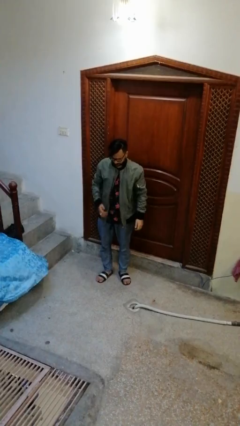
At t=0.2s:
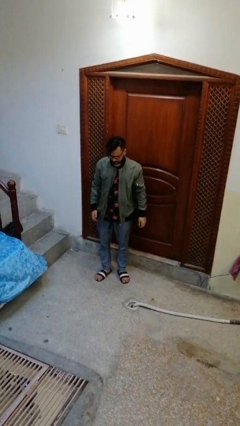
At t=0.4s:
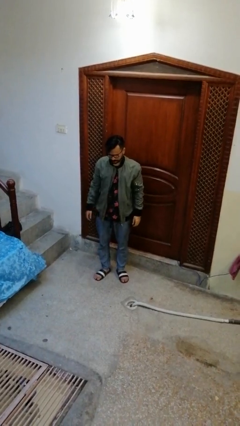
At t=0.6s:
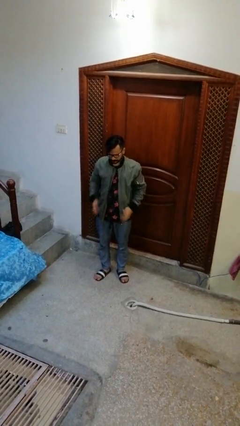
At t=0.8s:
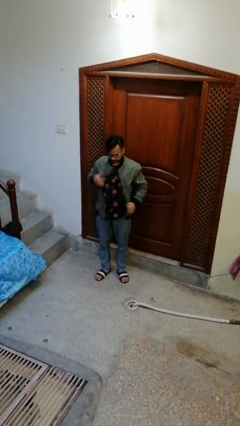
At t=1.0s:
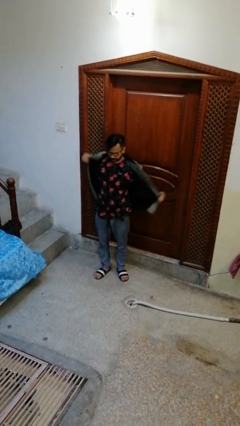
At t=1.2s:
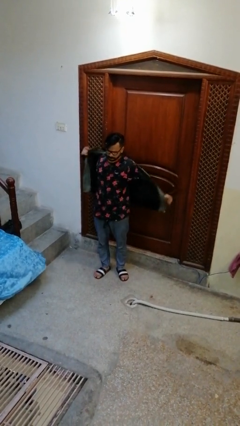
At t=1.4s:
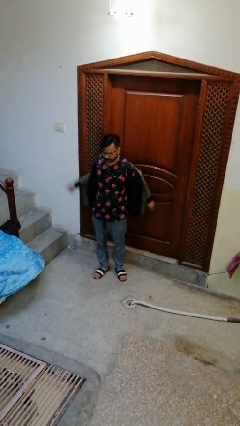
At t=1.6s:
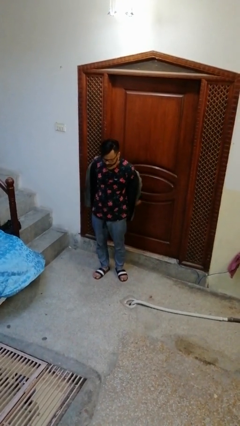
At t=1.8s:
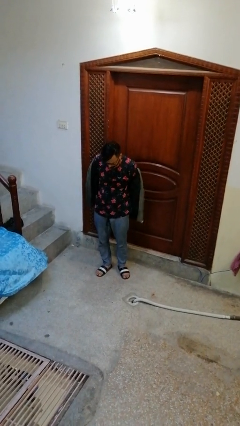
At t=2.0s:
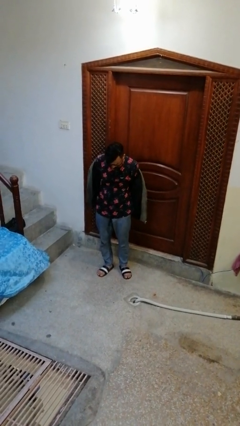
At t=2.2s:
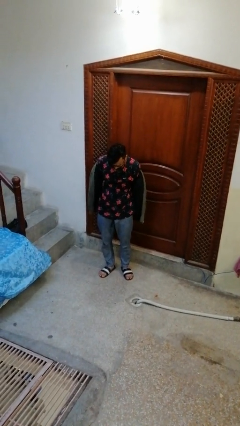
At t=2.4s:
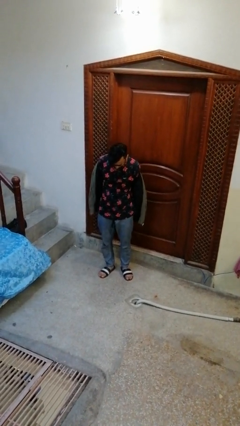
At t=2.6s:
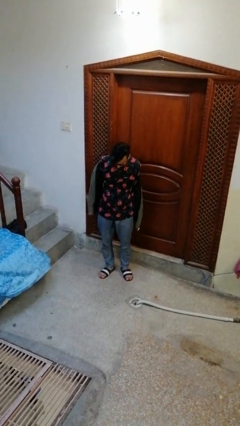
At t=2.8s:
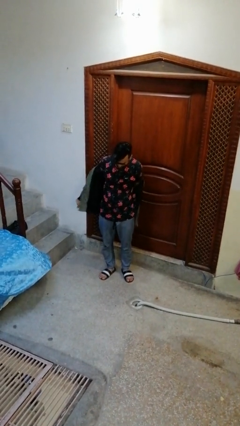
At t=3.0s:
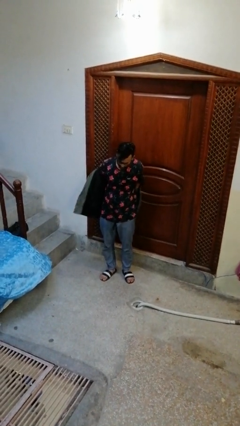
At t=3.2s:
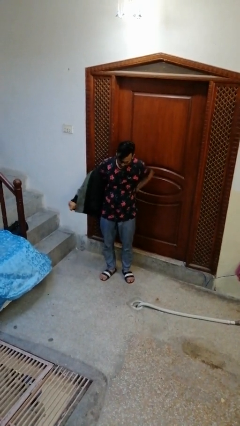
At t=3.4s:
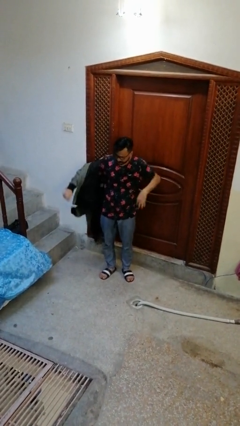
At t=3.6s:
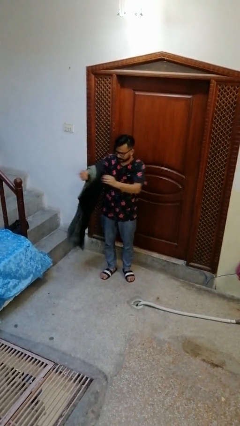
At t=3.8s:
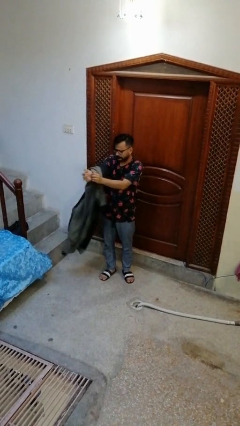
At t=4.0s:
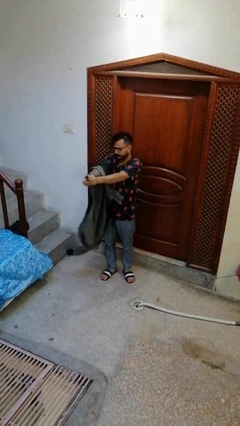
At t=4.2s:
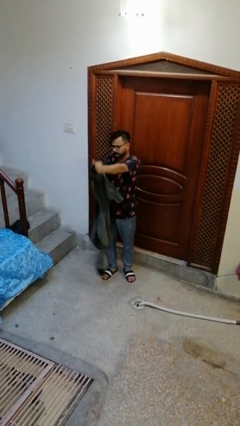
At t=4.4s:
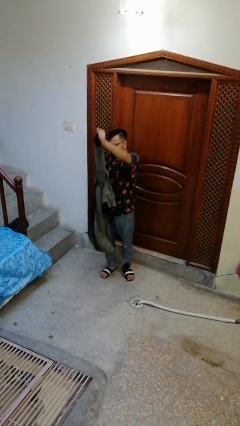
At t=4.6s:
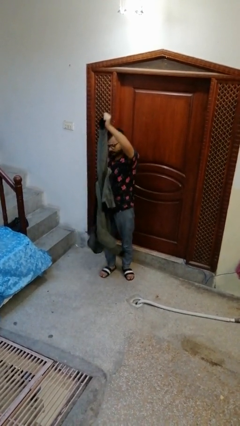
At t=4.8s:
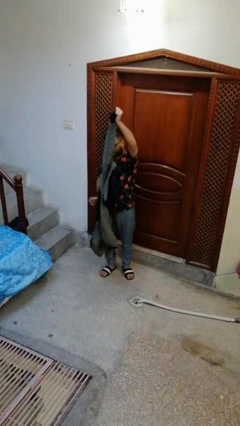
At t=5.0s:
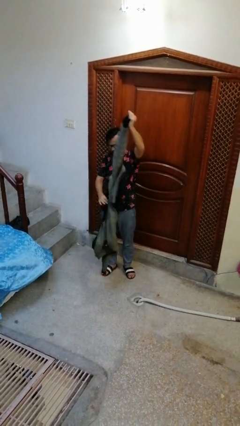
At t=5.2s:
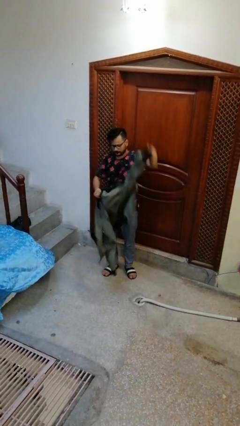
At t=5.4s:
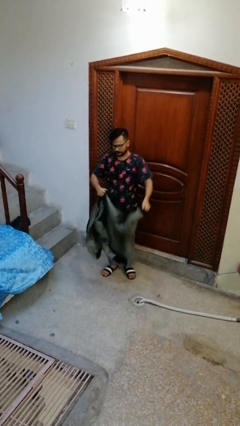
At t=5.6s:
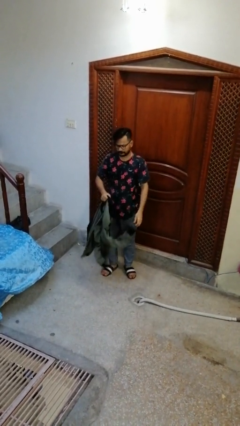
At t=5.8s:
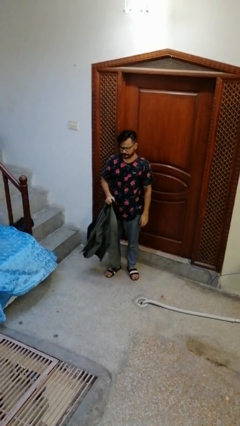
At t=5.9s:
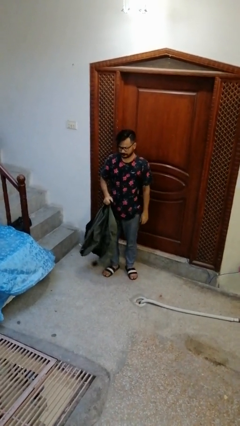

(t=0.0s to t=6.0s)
person takes off jacket

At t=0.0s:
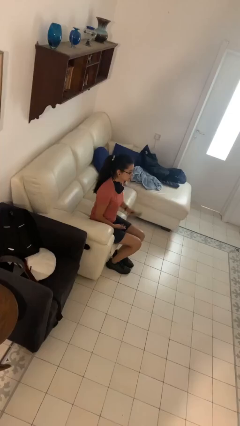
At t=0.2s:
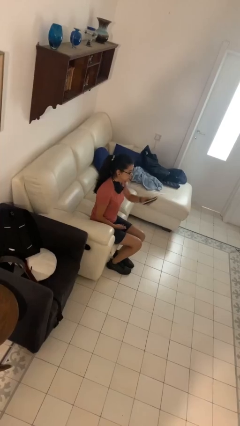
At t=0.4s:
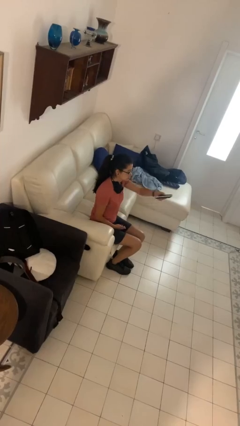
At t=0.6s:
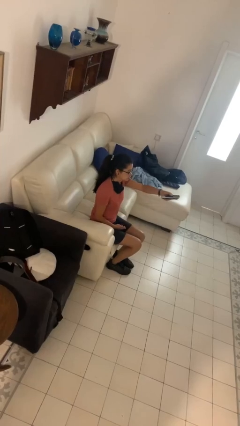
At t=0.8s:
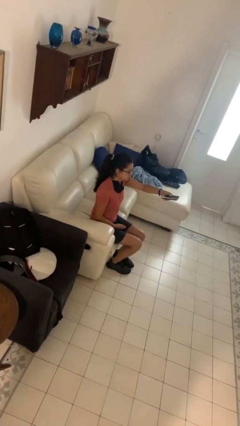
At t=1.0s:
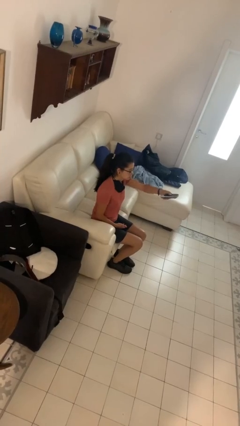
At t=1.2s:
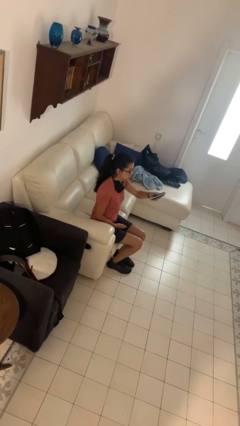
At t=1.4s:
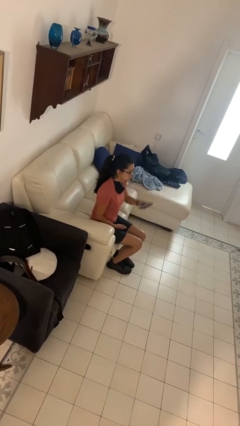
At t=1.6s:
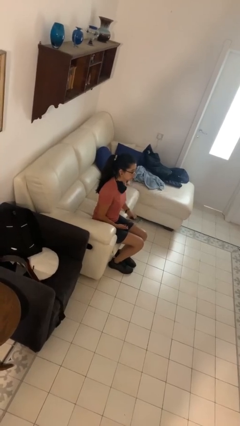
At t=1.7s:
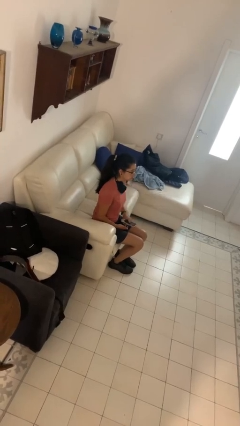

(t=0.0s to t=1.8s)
person uses television remote

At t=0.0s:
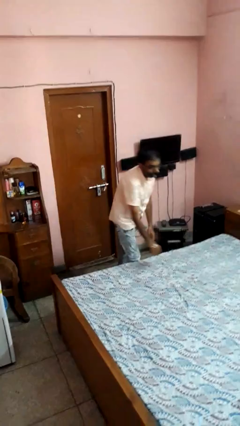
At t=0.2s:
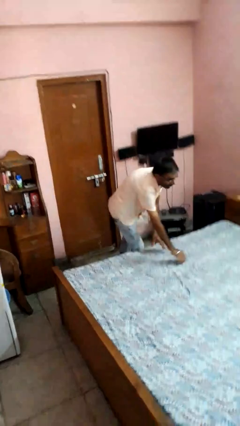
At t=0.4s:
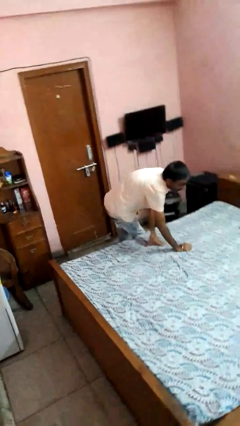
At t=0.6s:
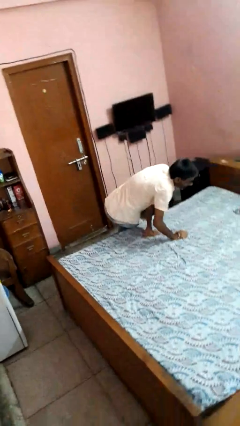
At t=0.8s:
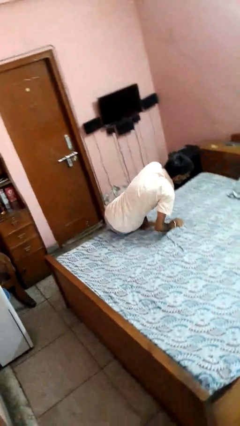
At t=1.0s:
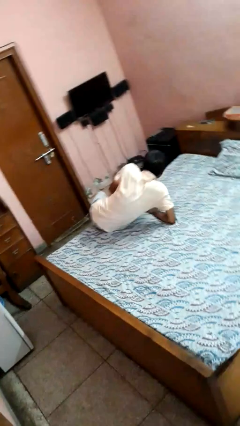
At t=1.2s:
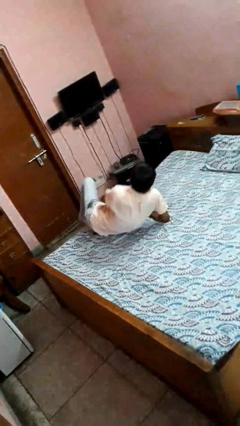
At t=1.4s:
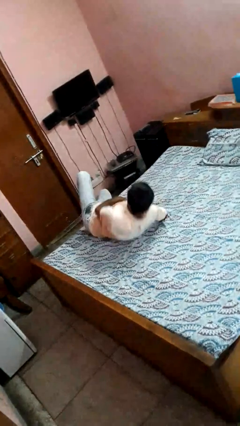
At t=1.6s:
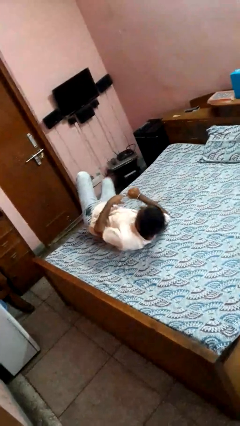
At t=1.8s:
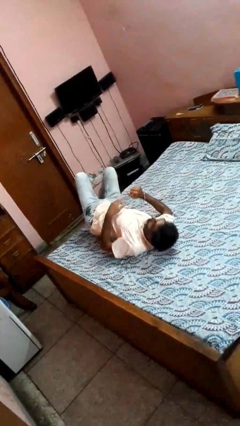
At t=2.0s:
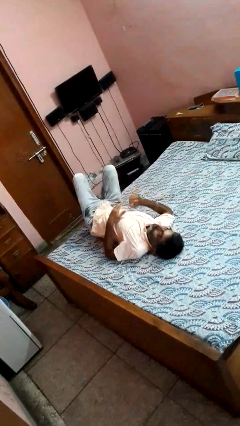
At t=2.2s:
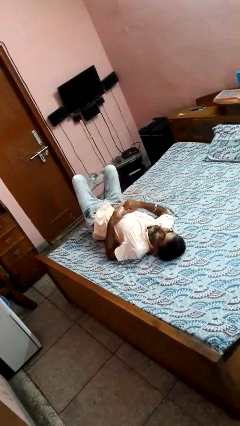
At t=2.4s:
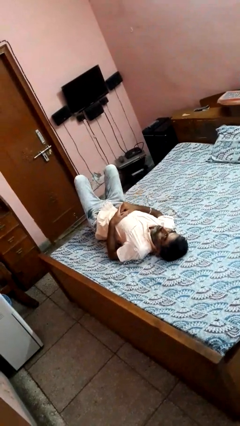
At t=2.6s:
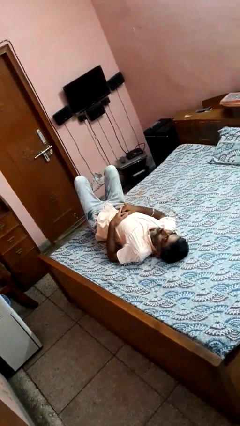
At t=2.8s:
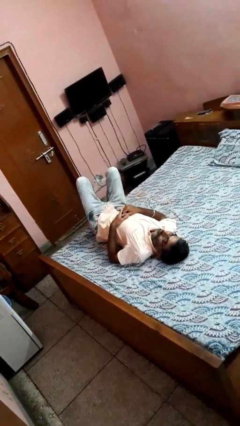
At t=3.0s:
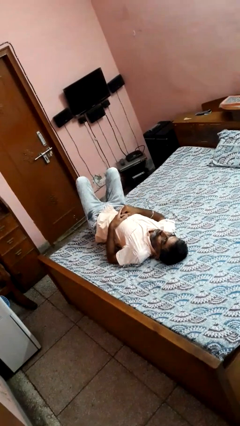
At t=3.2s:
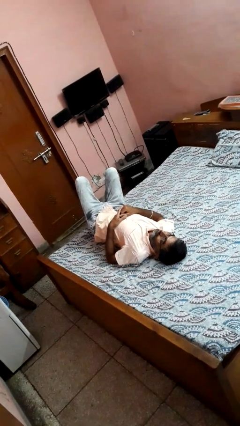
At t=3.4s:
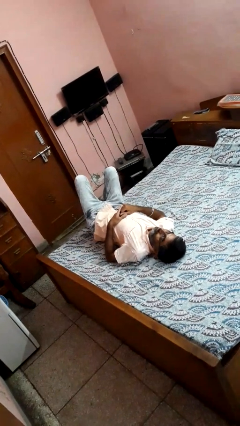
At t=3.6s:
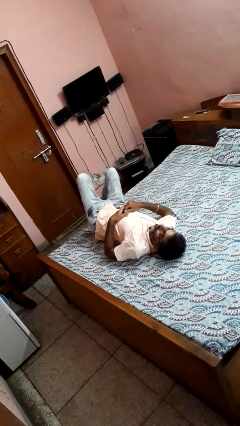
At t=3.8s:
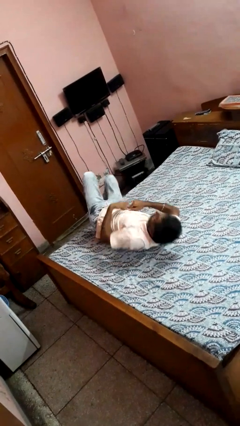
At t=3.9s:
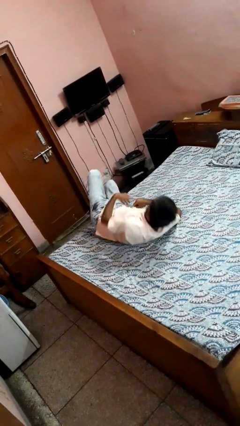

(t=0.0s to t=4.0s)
person lies down on bed

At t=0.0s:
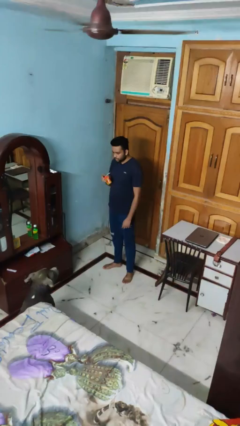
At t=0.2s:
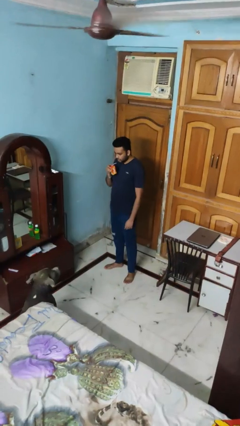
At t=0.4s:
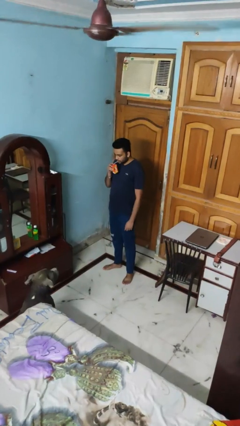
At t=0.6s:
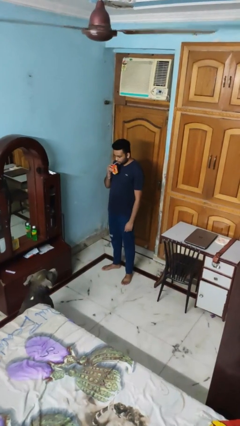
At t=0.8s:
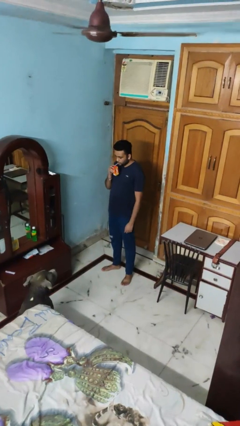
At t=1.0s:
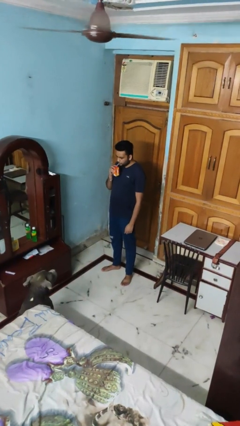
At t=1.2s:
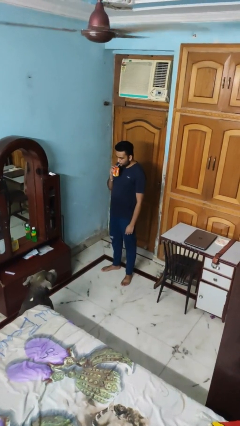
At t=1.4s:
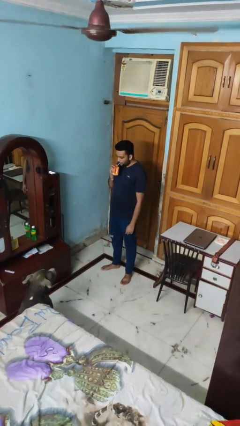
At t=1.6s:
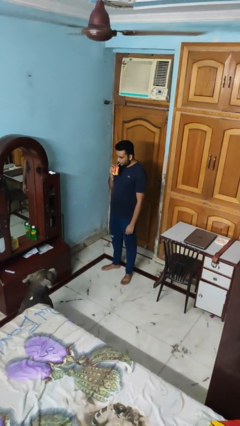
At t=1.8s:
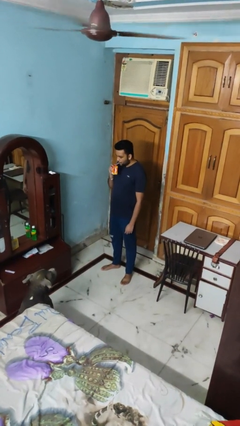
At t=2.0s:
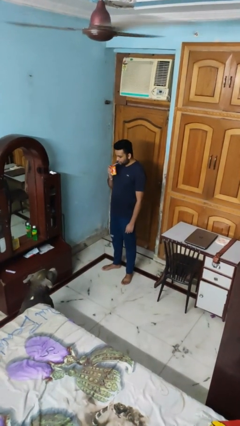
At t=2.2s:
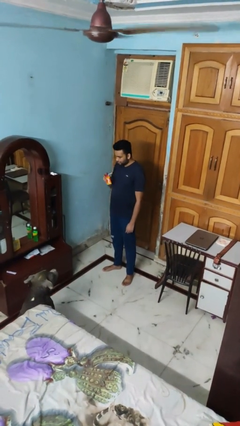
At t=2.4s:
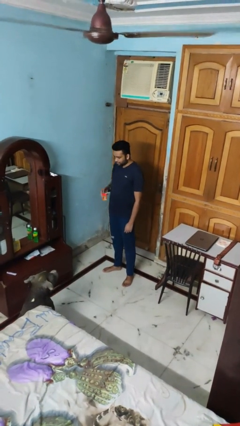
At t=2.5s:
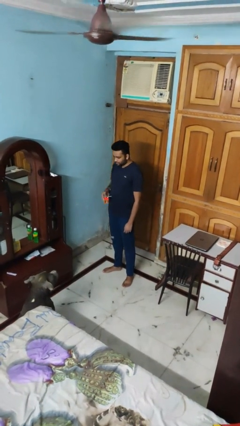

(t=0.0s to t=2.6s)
person drinks from straw

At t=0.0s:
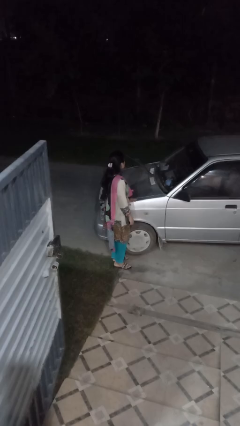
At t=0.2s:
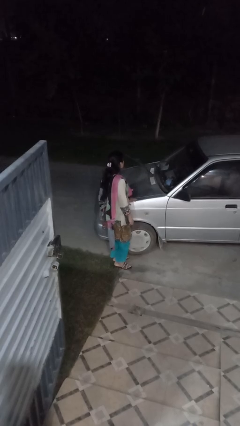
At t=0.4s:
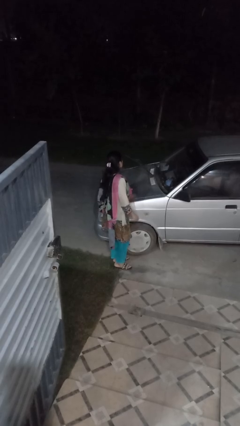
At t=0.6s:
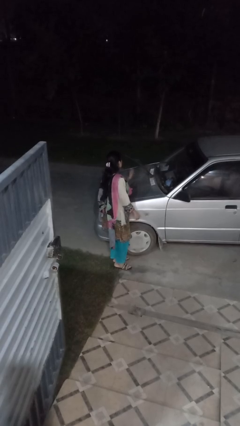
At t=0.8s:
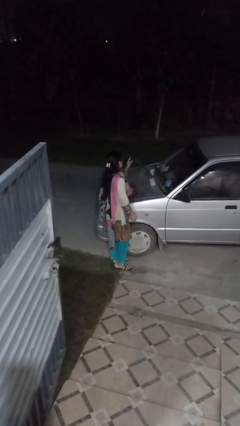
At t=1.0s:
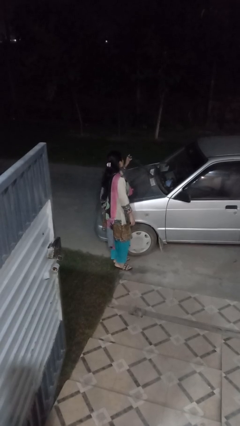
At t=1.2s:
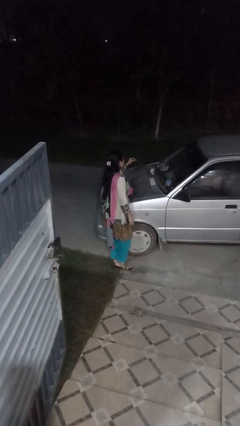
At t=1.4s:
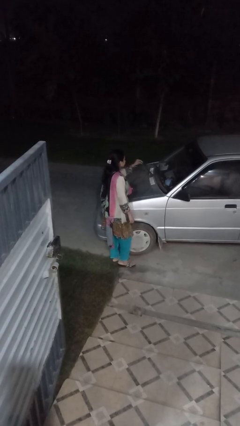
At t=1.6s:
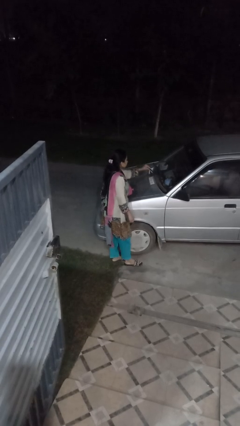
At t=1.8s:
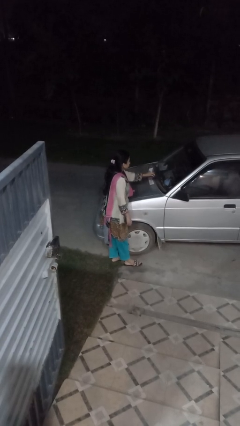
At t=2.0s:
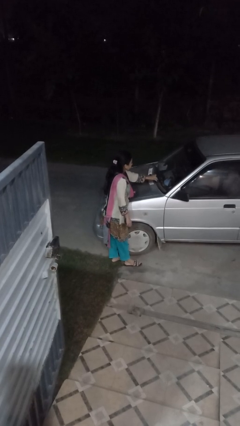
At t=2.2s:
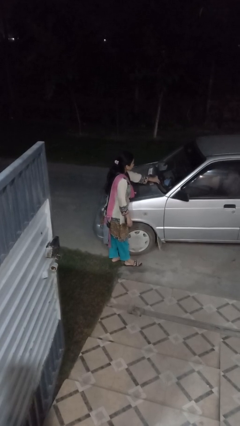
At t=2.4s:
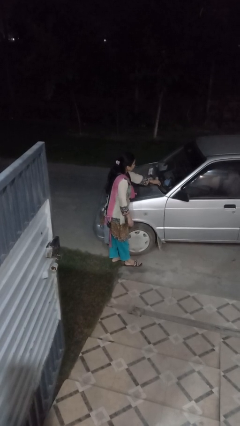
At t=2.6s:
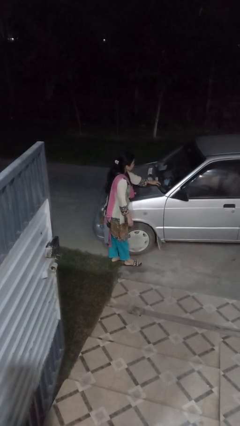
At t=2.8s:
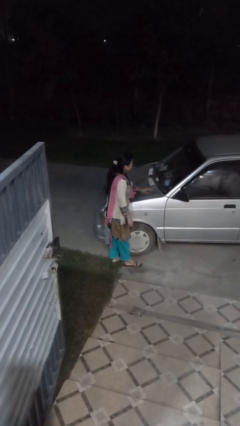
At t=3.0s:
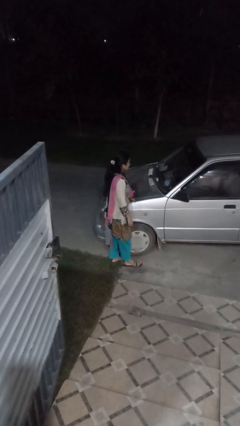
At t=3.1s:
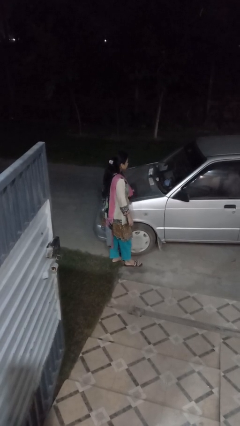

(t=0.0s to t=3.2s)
person flips down car wipers
